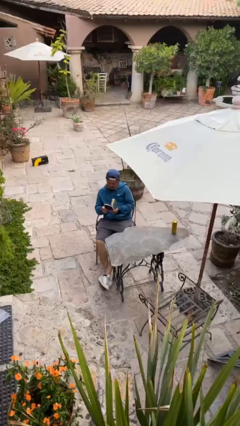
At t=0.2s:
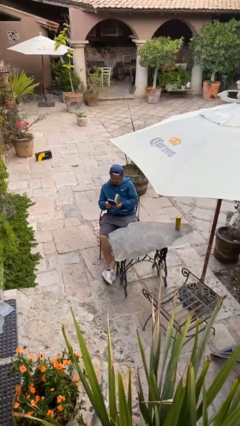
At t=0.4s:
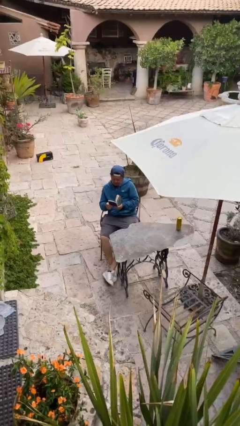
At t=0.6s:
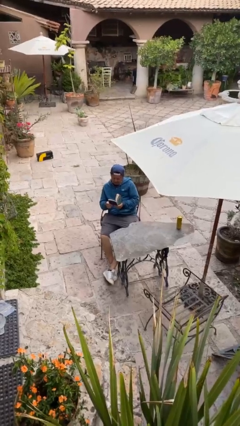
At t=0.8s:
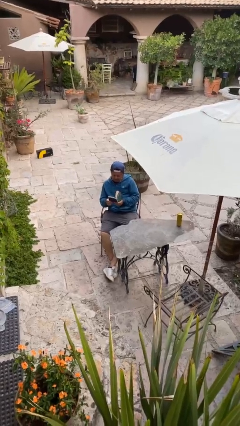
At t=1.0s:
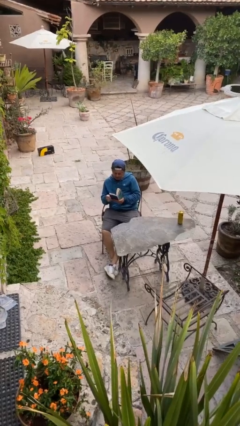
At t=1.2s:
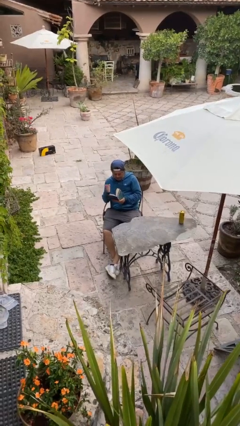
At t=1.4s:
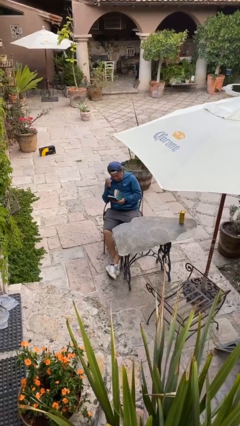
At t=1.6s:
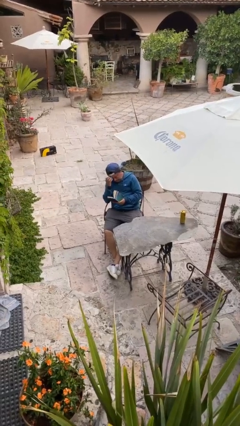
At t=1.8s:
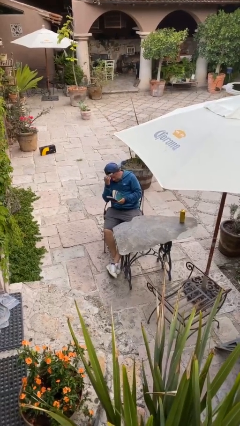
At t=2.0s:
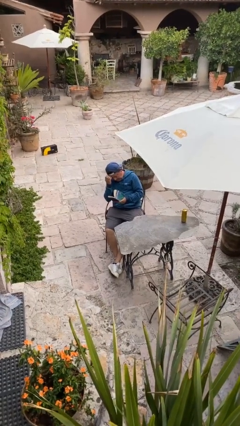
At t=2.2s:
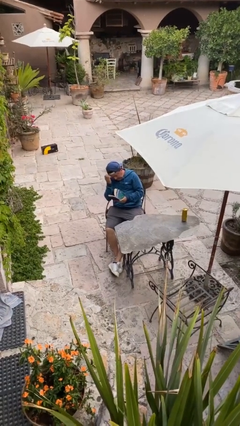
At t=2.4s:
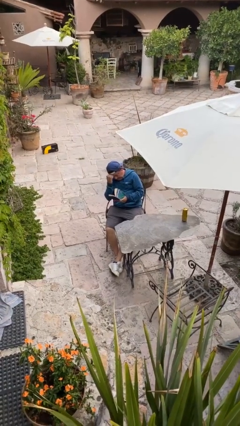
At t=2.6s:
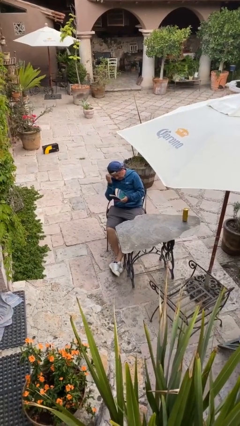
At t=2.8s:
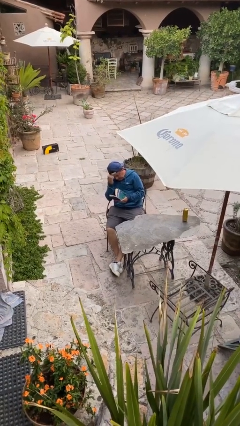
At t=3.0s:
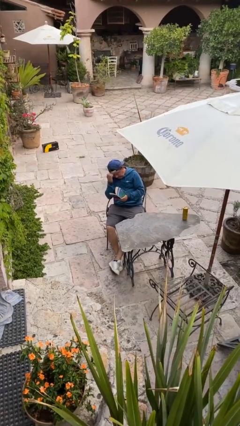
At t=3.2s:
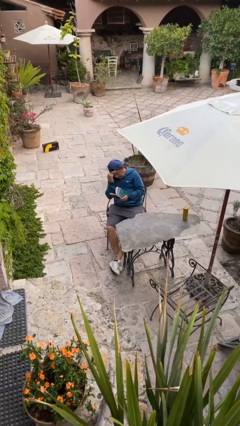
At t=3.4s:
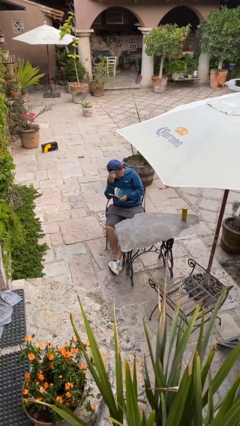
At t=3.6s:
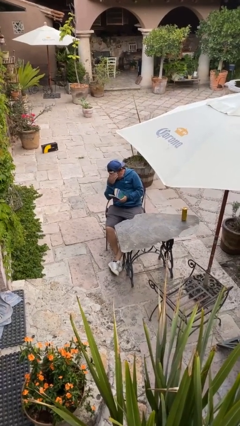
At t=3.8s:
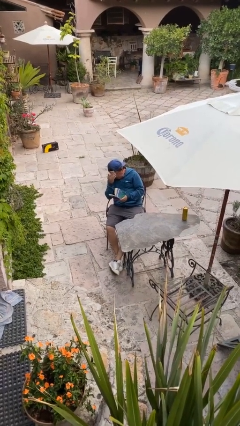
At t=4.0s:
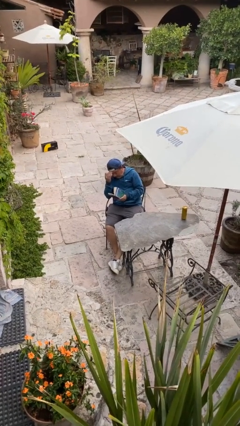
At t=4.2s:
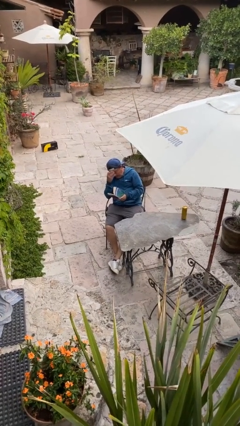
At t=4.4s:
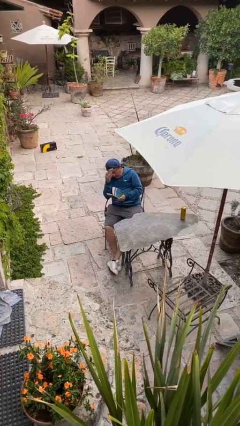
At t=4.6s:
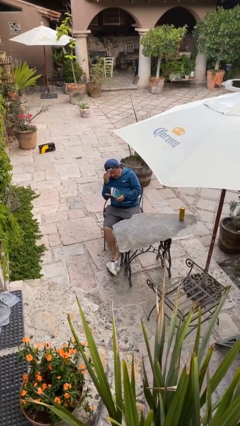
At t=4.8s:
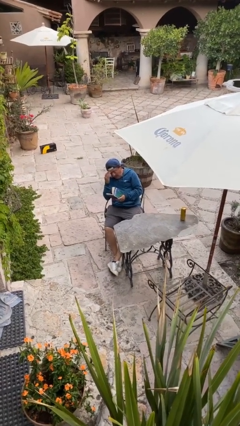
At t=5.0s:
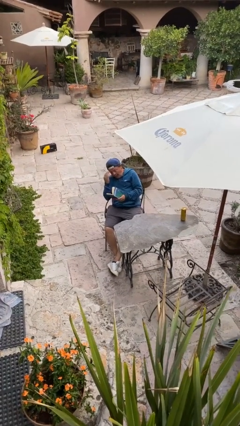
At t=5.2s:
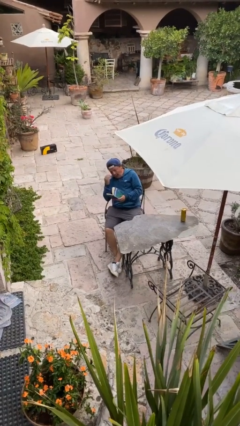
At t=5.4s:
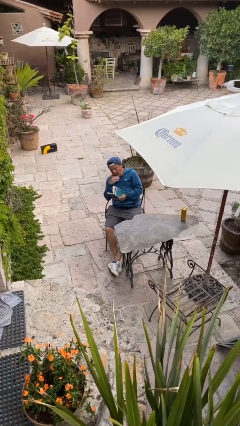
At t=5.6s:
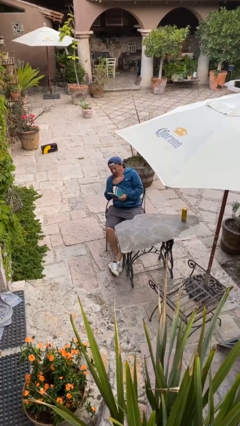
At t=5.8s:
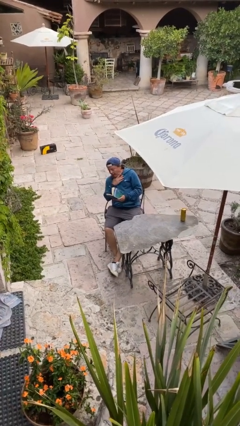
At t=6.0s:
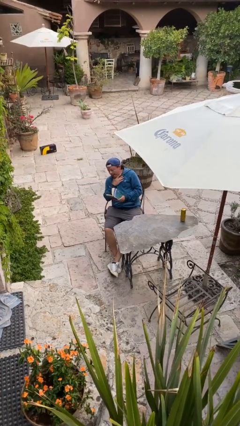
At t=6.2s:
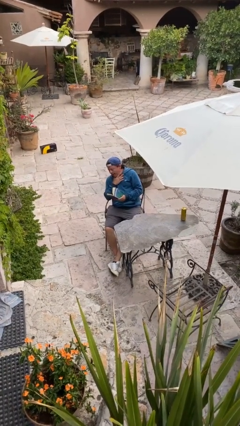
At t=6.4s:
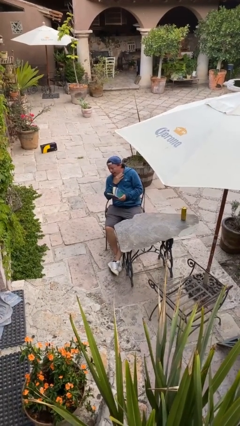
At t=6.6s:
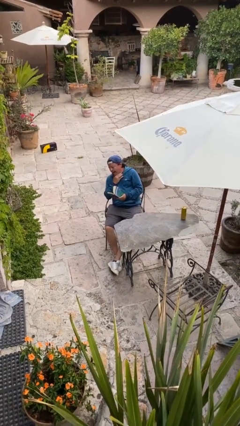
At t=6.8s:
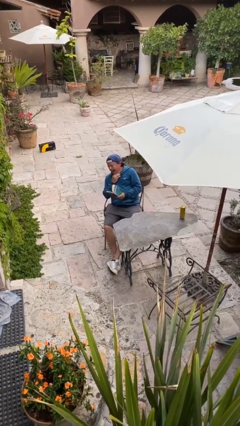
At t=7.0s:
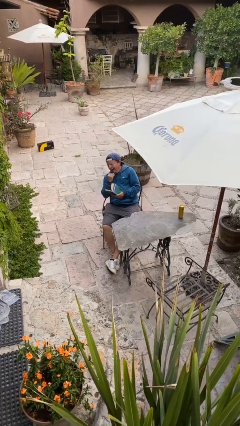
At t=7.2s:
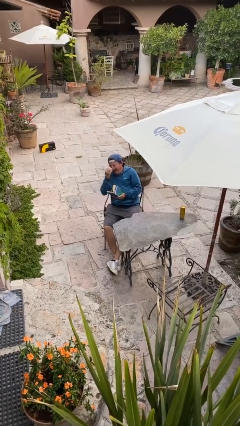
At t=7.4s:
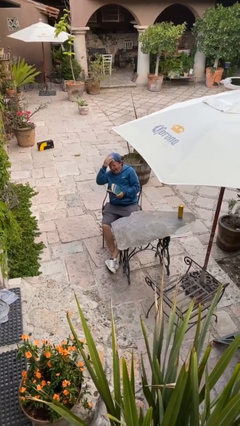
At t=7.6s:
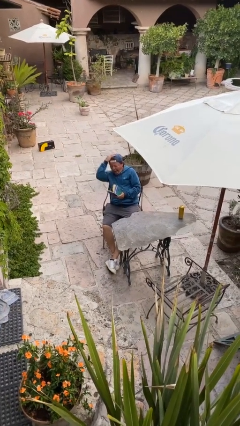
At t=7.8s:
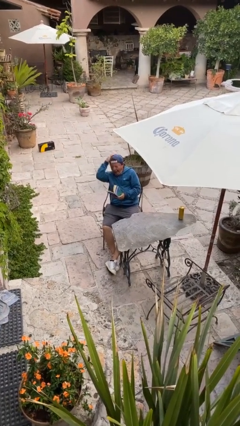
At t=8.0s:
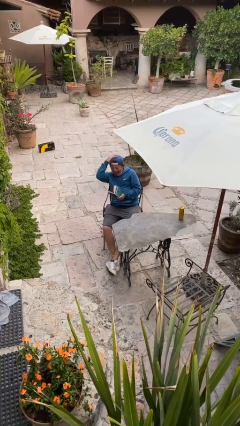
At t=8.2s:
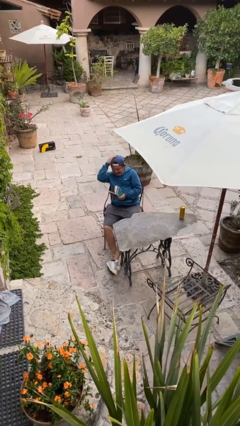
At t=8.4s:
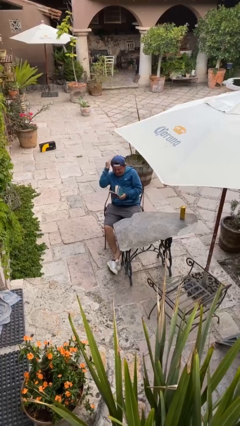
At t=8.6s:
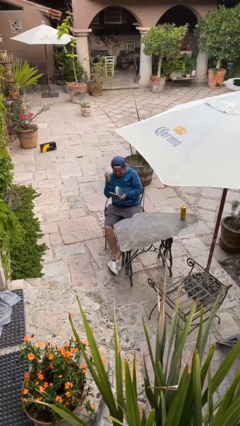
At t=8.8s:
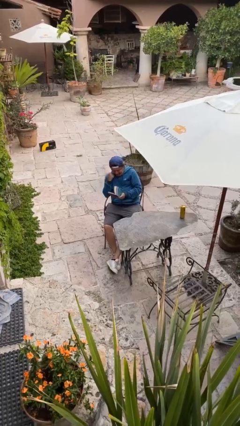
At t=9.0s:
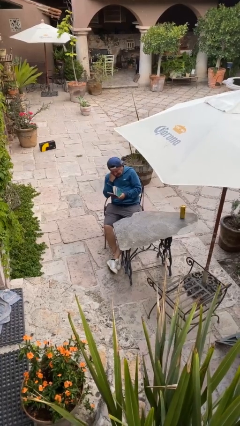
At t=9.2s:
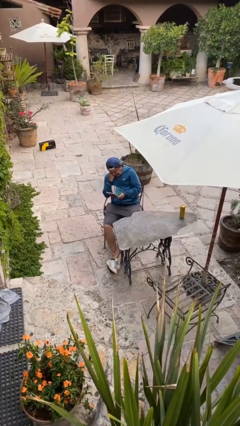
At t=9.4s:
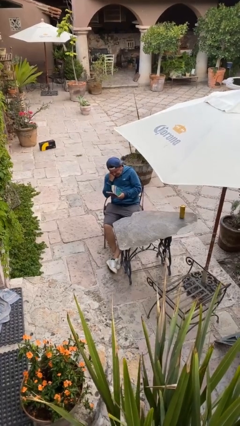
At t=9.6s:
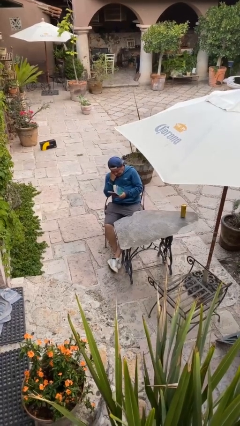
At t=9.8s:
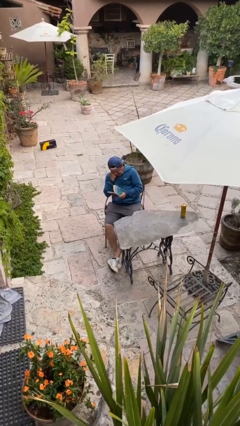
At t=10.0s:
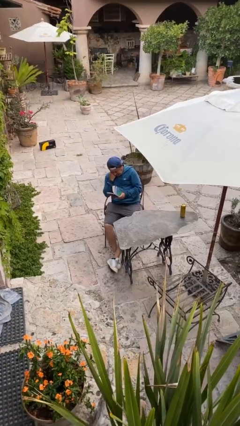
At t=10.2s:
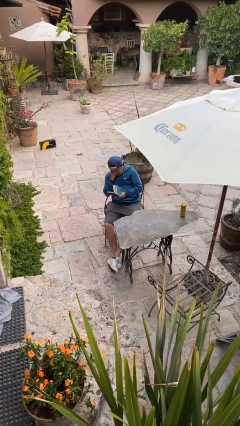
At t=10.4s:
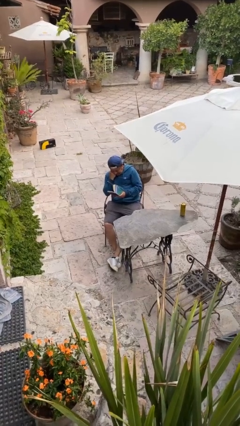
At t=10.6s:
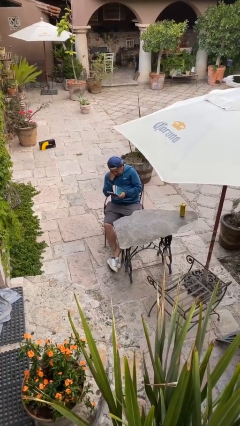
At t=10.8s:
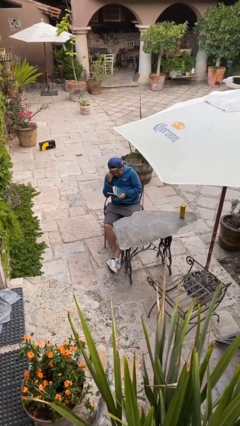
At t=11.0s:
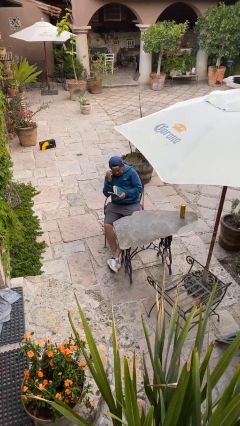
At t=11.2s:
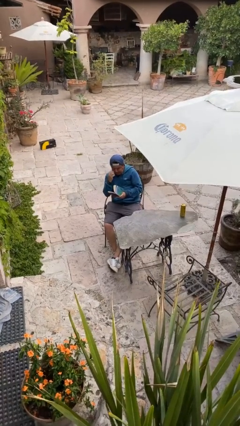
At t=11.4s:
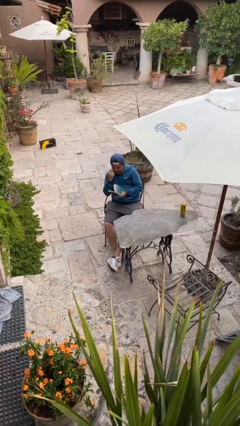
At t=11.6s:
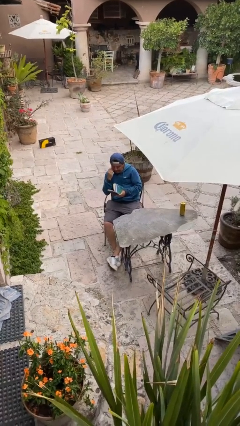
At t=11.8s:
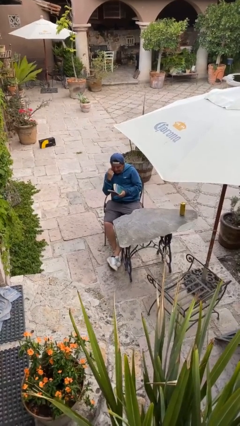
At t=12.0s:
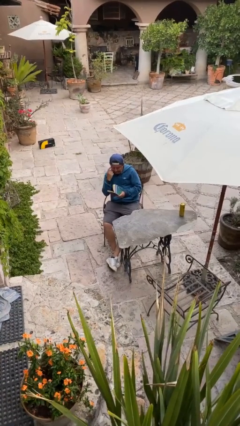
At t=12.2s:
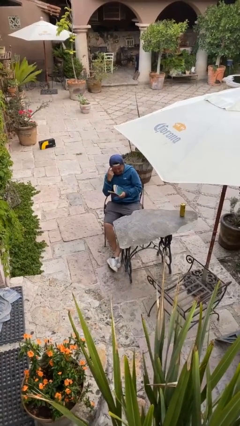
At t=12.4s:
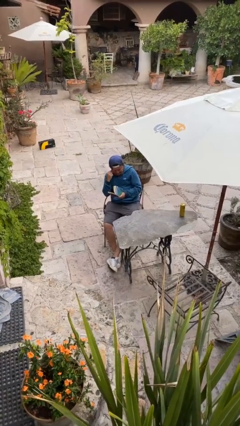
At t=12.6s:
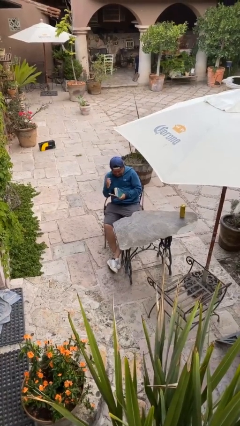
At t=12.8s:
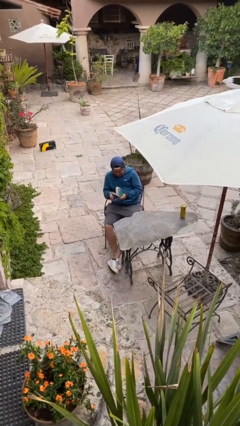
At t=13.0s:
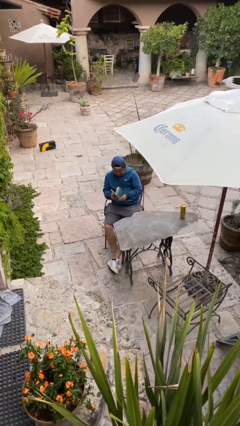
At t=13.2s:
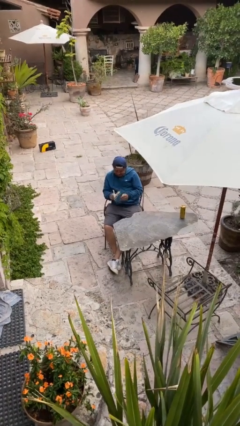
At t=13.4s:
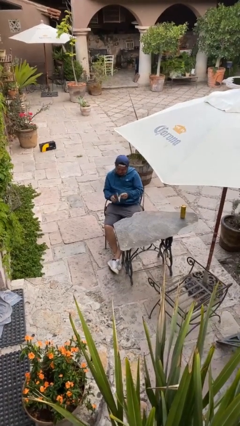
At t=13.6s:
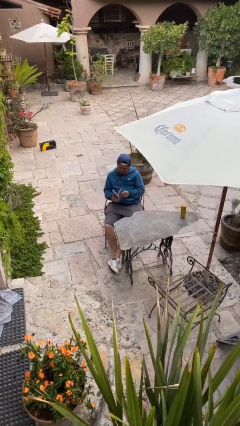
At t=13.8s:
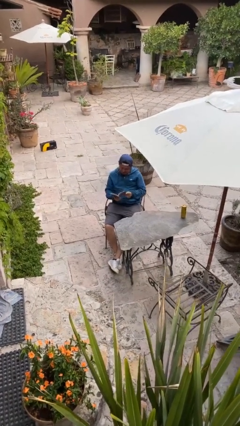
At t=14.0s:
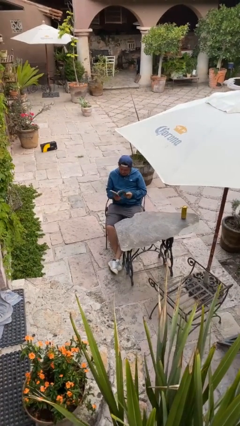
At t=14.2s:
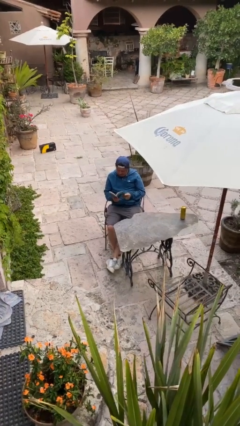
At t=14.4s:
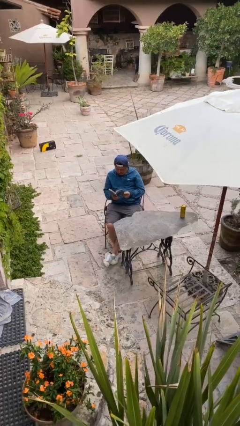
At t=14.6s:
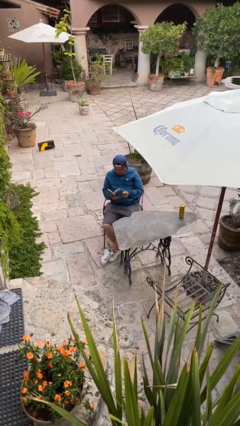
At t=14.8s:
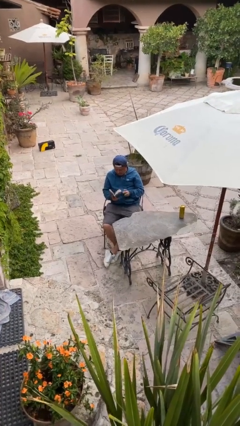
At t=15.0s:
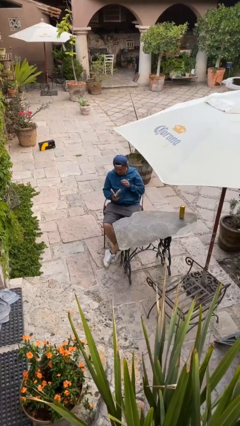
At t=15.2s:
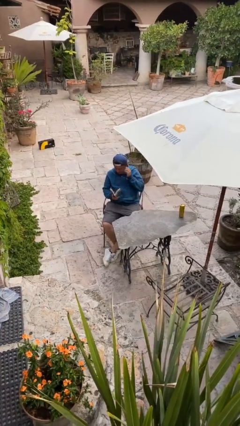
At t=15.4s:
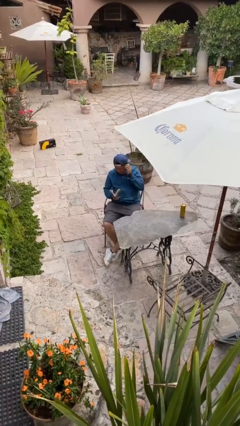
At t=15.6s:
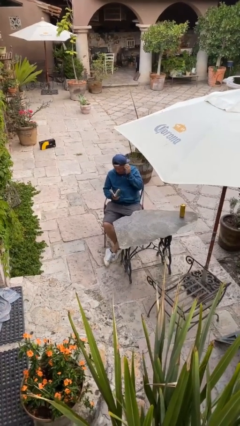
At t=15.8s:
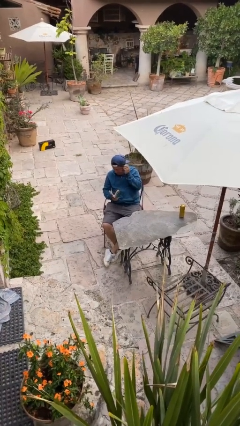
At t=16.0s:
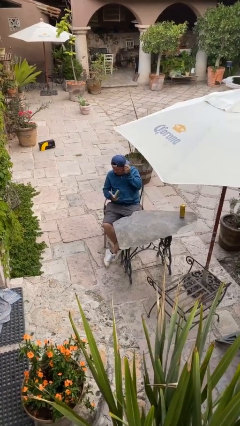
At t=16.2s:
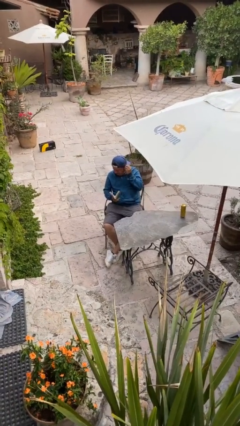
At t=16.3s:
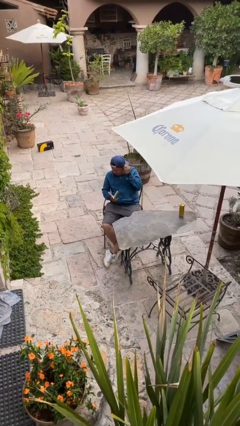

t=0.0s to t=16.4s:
person reads document

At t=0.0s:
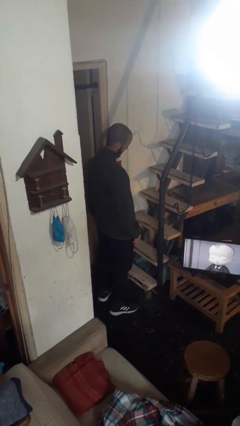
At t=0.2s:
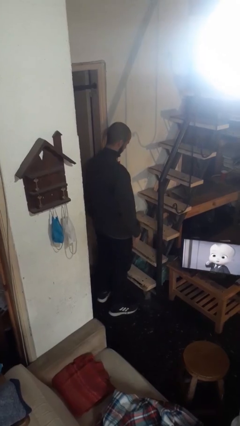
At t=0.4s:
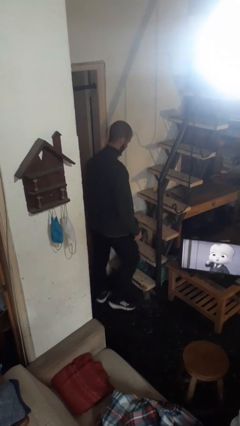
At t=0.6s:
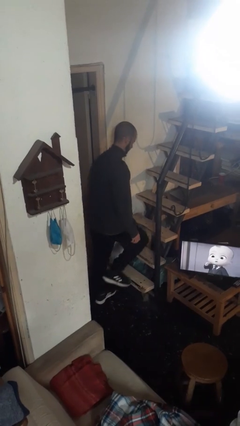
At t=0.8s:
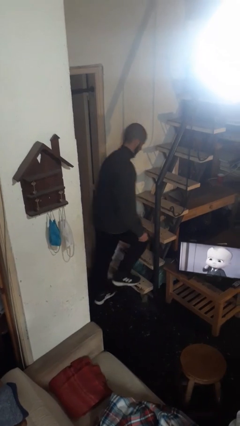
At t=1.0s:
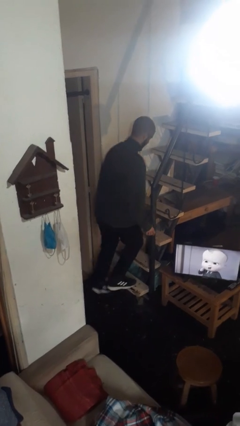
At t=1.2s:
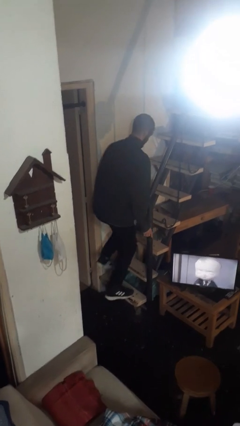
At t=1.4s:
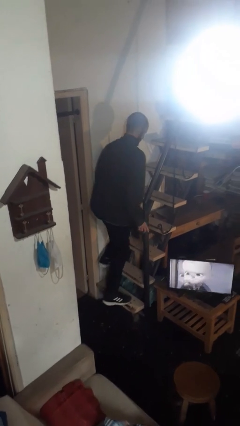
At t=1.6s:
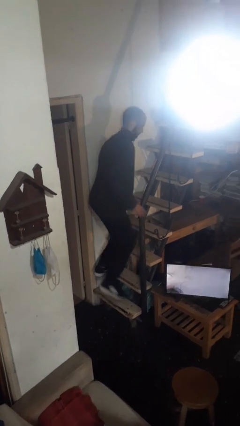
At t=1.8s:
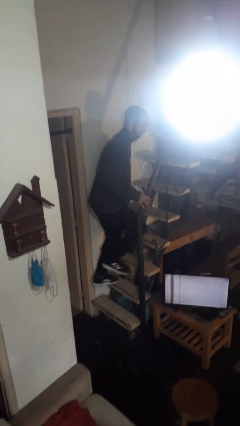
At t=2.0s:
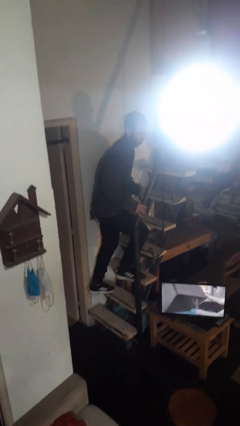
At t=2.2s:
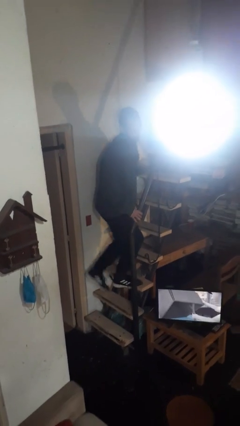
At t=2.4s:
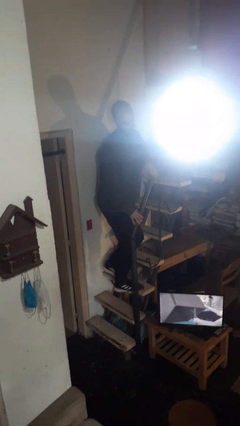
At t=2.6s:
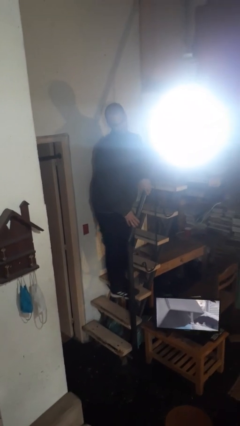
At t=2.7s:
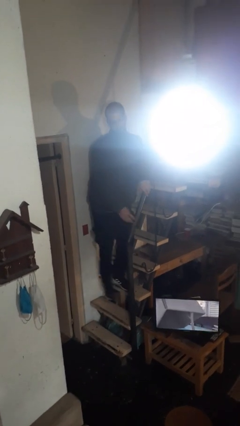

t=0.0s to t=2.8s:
person climbs up stairs
